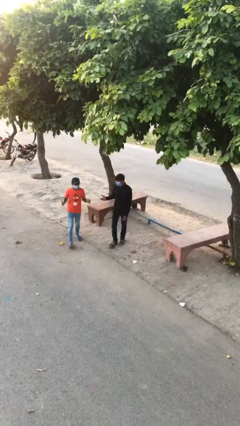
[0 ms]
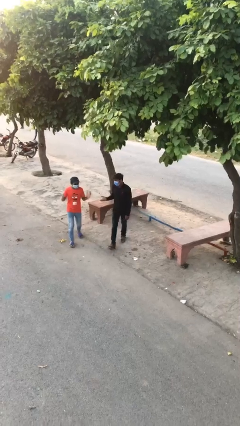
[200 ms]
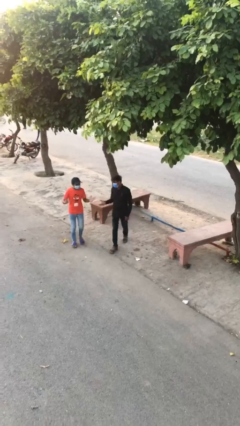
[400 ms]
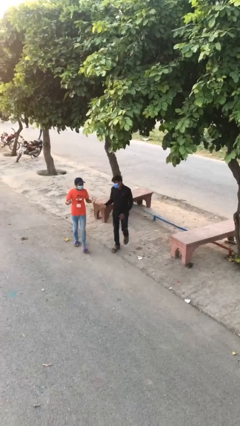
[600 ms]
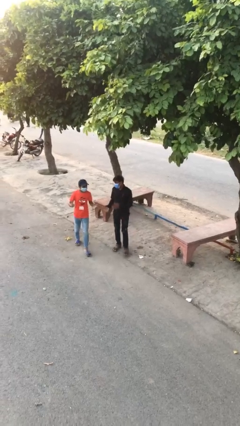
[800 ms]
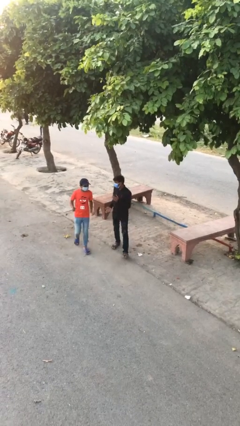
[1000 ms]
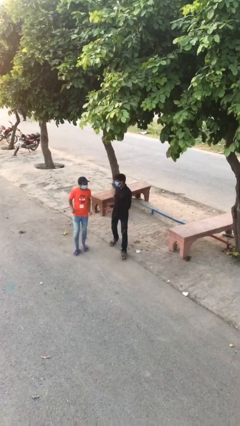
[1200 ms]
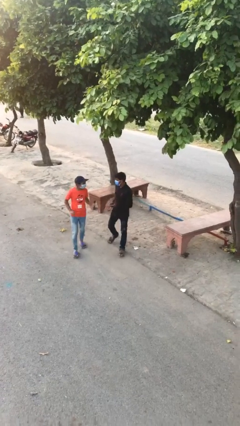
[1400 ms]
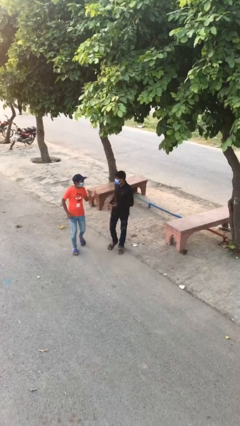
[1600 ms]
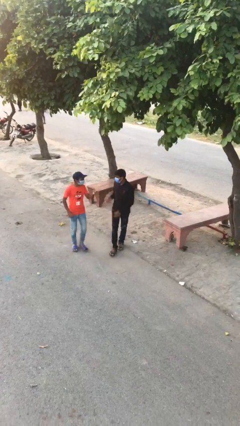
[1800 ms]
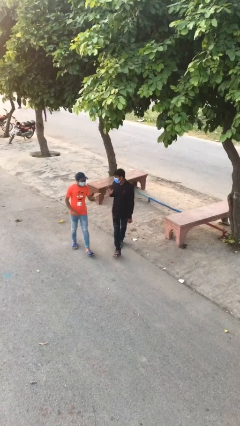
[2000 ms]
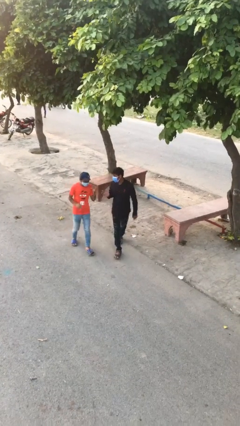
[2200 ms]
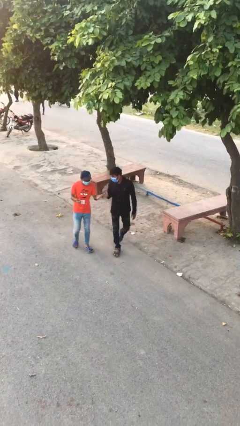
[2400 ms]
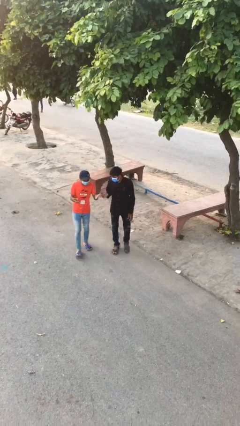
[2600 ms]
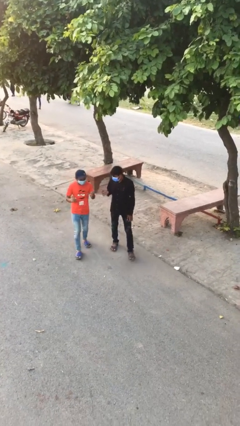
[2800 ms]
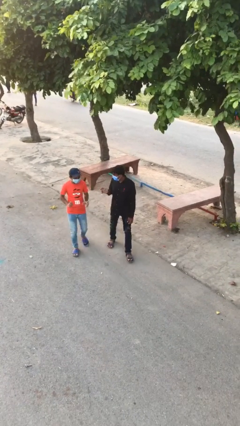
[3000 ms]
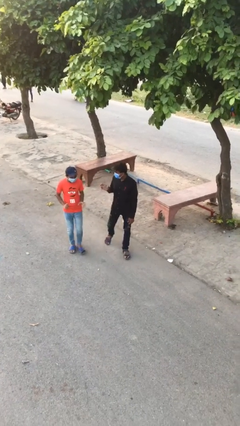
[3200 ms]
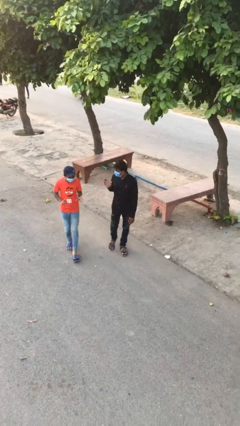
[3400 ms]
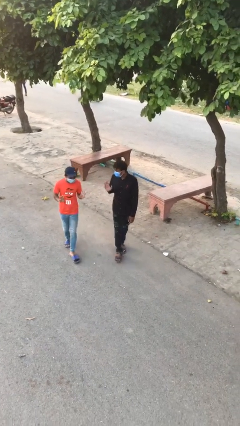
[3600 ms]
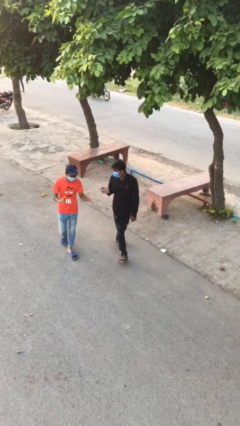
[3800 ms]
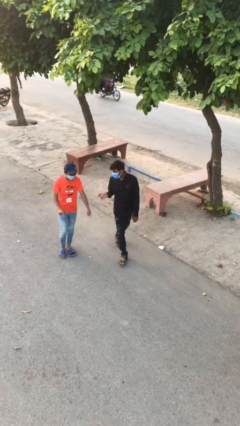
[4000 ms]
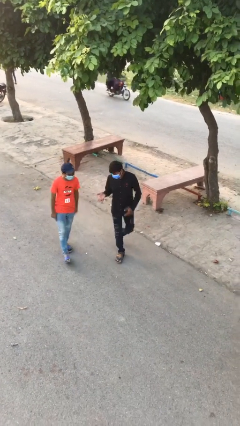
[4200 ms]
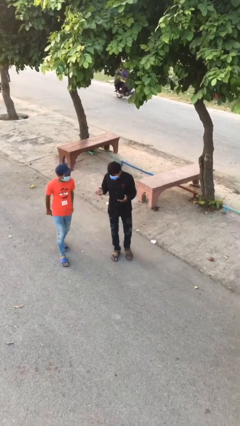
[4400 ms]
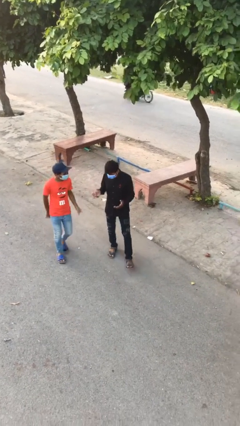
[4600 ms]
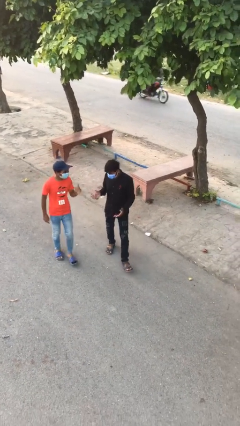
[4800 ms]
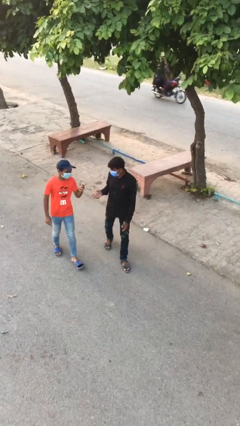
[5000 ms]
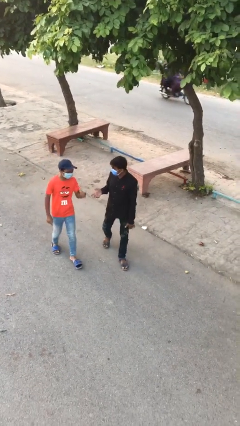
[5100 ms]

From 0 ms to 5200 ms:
person talks to person

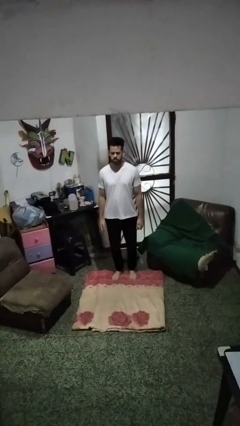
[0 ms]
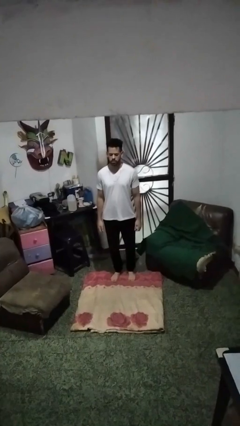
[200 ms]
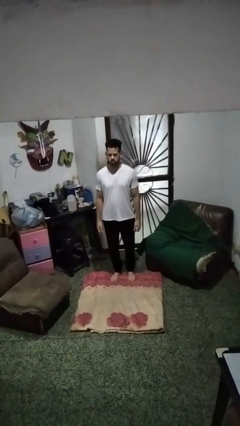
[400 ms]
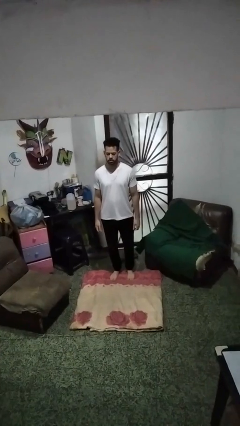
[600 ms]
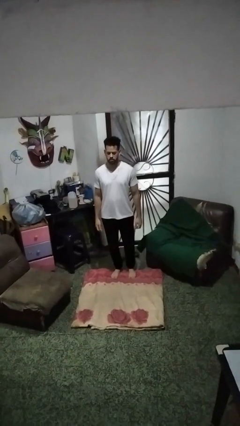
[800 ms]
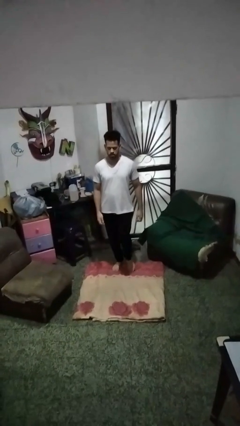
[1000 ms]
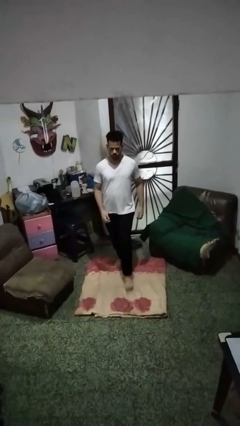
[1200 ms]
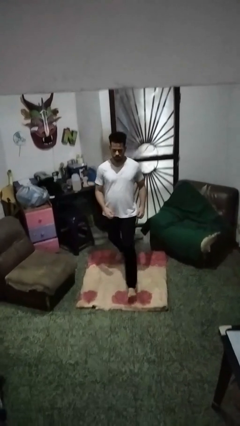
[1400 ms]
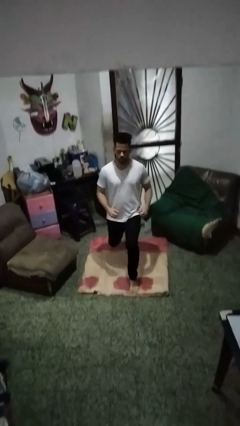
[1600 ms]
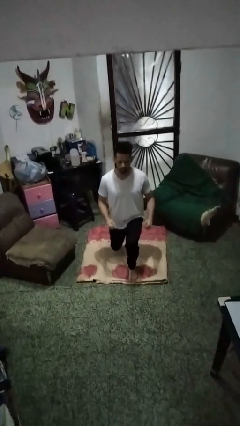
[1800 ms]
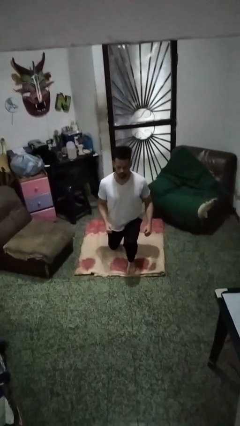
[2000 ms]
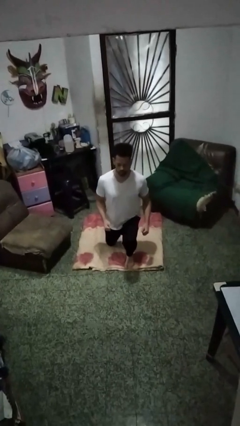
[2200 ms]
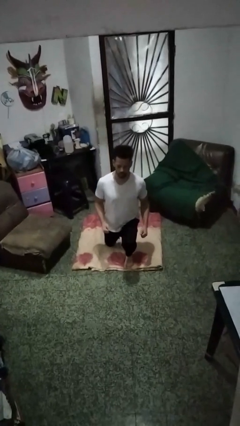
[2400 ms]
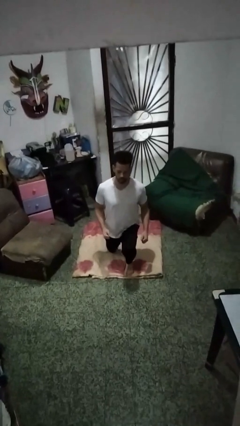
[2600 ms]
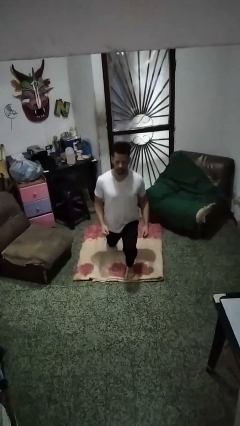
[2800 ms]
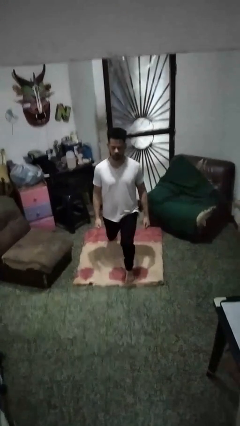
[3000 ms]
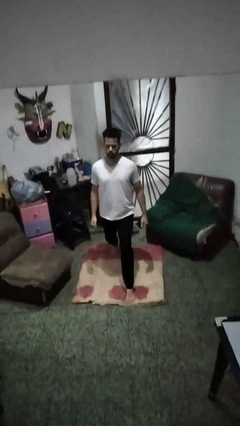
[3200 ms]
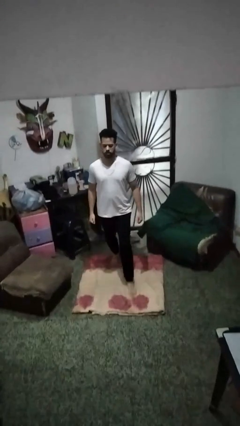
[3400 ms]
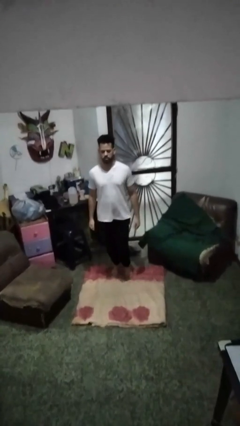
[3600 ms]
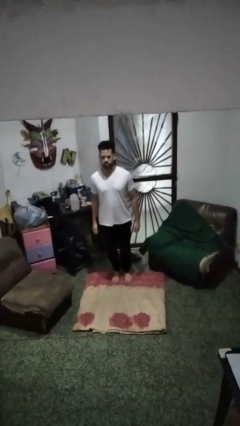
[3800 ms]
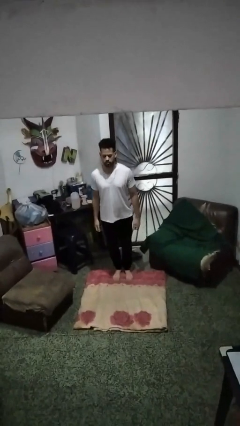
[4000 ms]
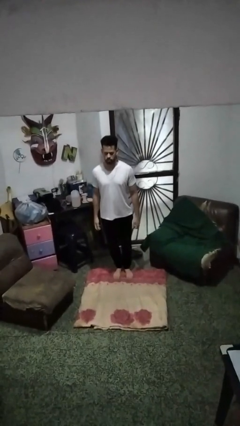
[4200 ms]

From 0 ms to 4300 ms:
person exercises with lunges

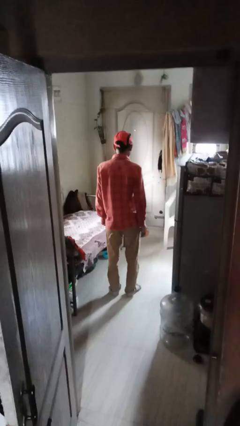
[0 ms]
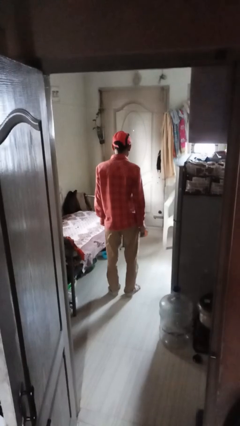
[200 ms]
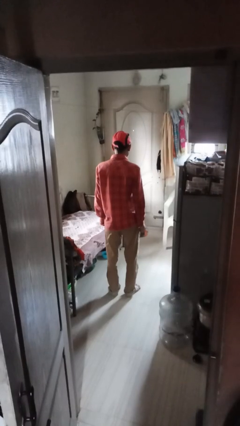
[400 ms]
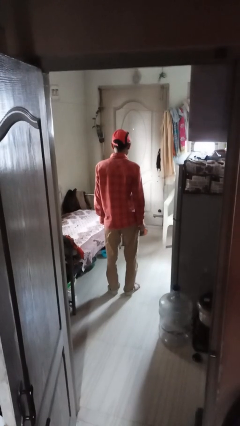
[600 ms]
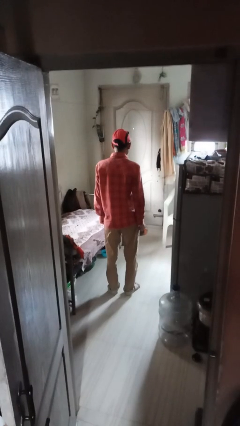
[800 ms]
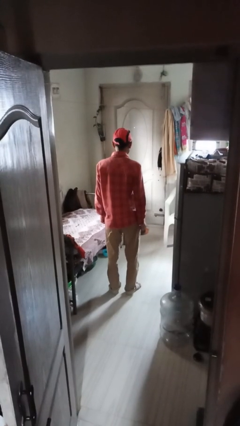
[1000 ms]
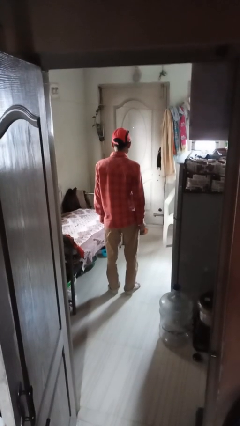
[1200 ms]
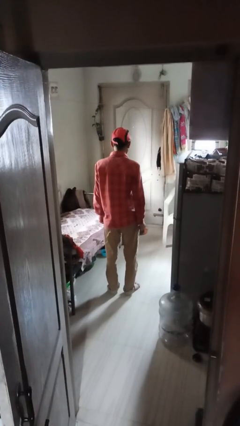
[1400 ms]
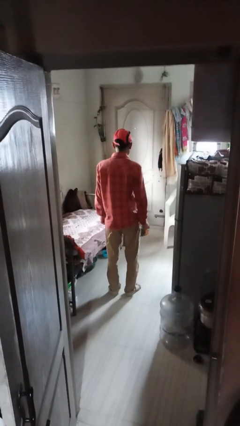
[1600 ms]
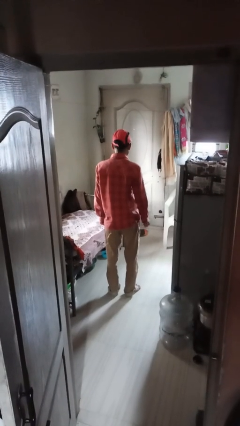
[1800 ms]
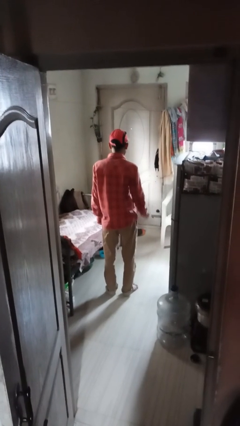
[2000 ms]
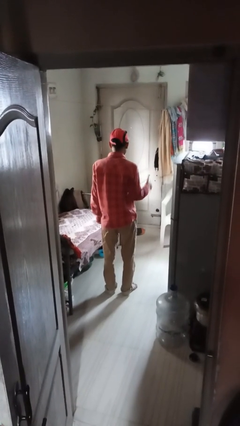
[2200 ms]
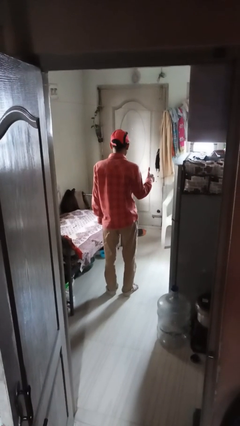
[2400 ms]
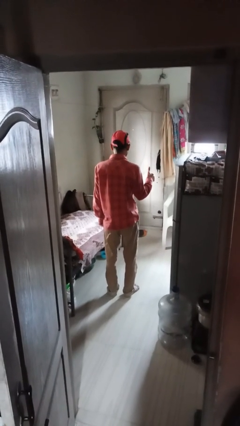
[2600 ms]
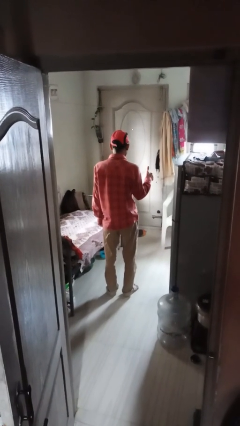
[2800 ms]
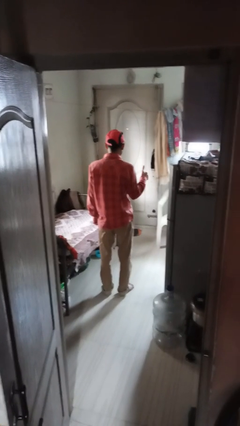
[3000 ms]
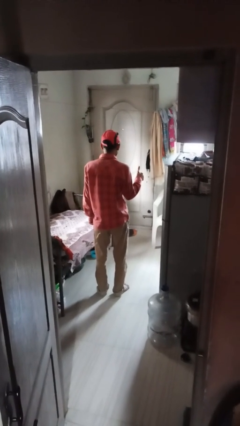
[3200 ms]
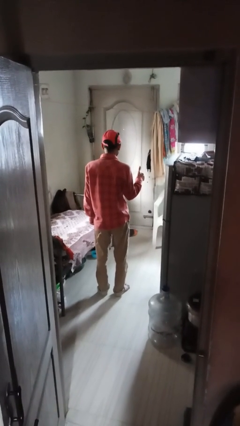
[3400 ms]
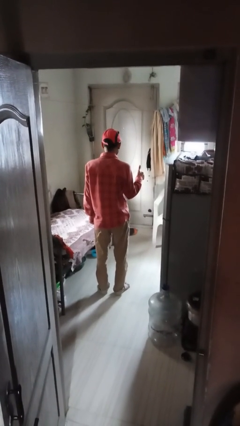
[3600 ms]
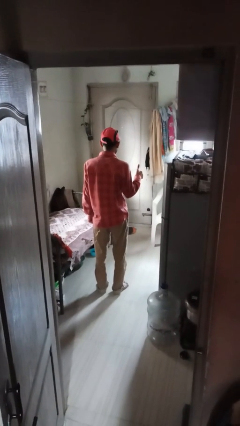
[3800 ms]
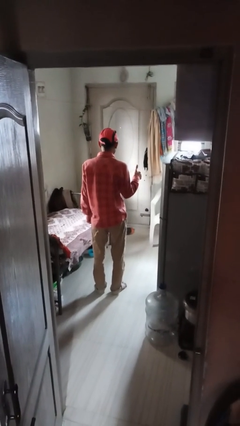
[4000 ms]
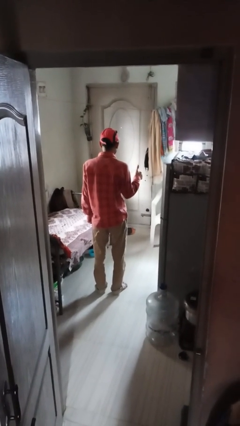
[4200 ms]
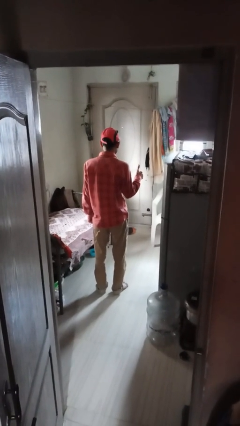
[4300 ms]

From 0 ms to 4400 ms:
person gestures thumbs up

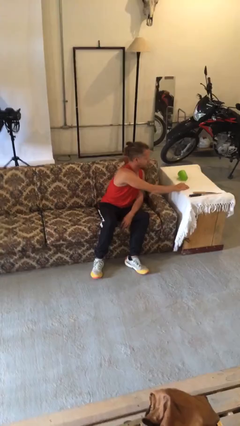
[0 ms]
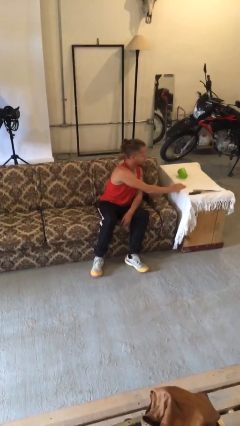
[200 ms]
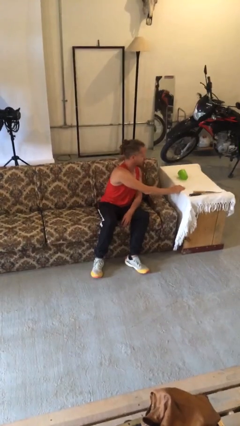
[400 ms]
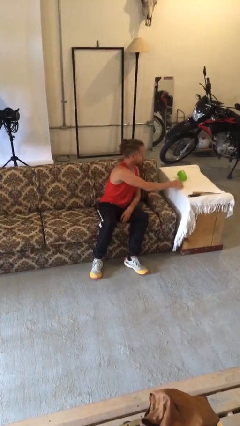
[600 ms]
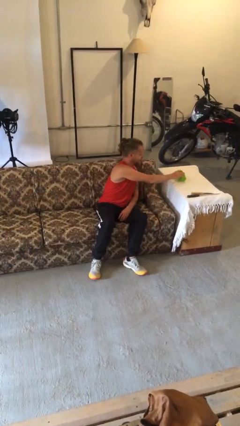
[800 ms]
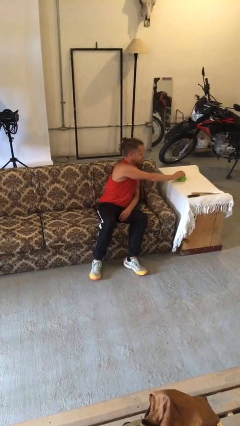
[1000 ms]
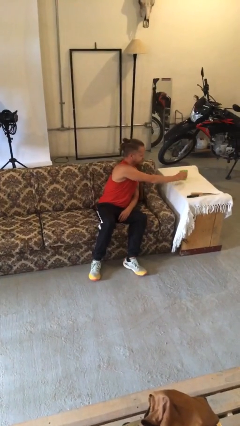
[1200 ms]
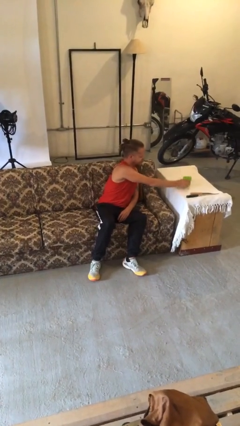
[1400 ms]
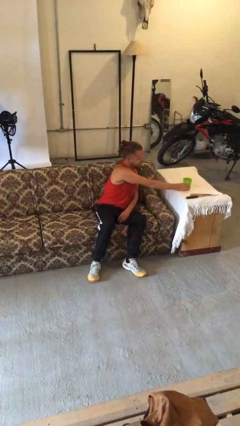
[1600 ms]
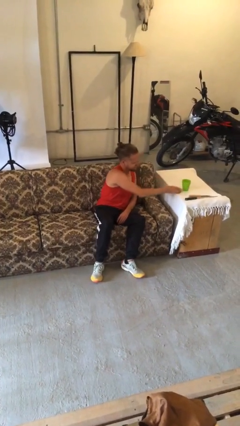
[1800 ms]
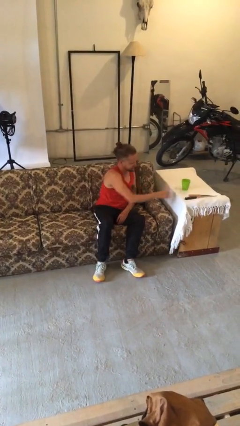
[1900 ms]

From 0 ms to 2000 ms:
person sets upright glass

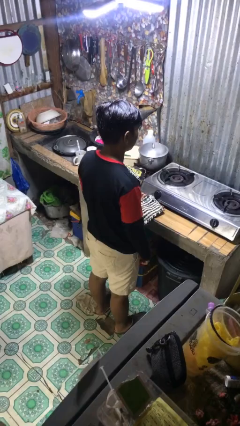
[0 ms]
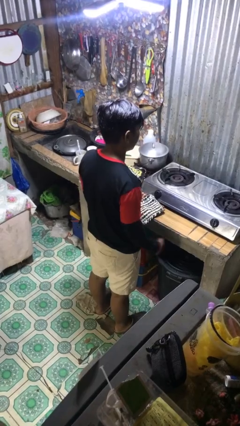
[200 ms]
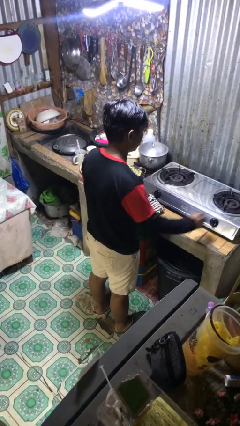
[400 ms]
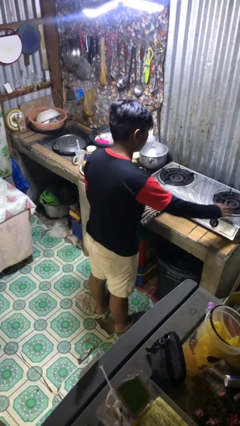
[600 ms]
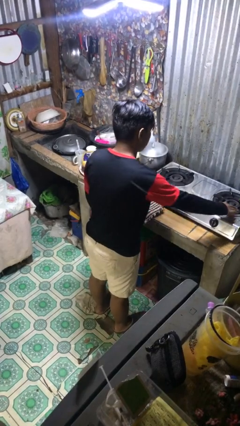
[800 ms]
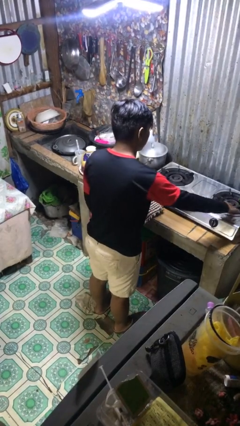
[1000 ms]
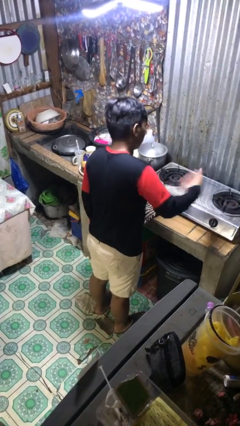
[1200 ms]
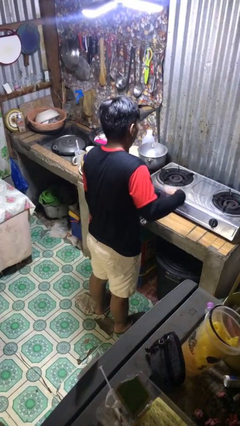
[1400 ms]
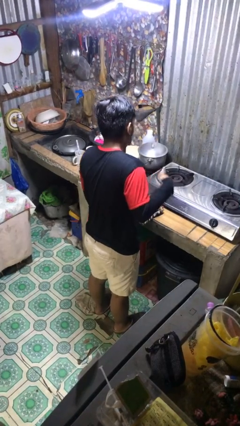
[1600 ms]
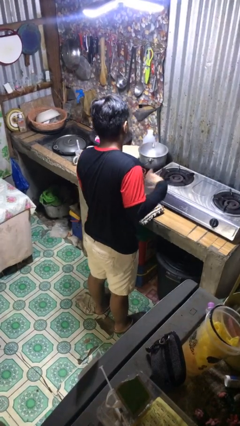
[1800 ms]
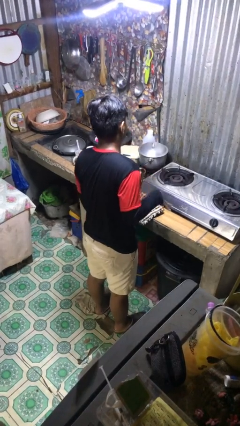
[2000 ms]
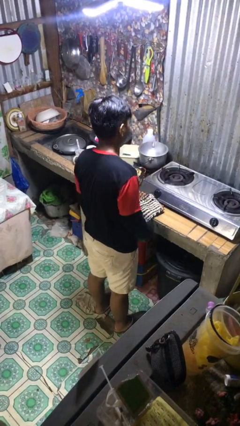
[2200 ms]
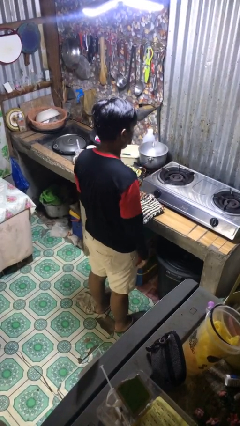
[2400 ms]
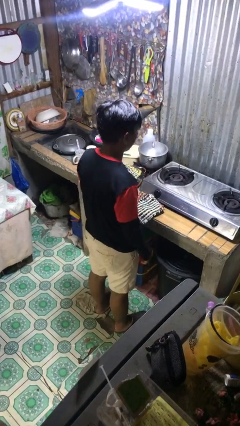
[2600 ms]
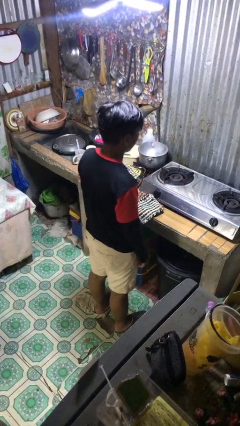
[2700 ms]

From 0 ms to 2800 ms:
person burns hand
